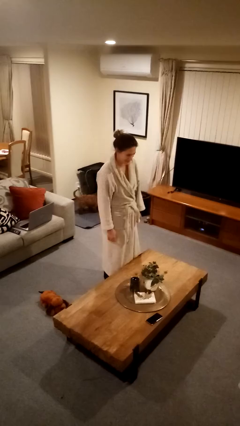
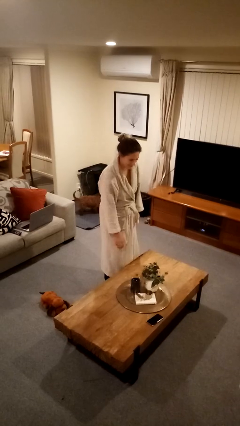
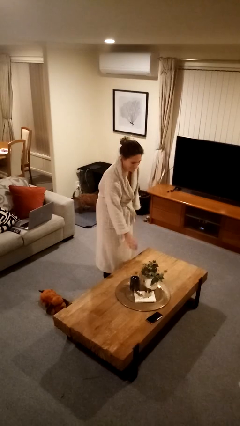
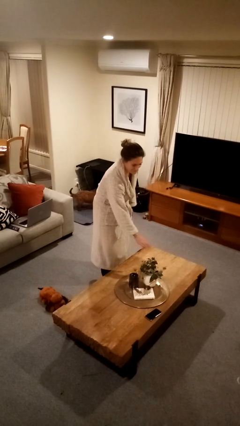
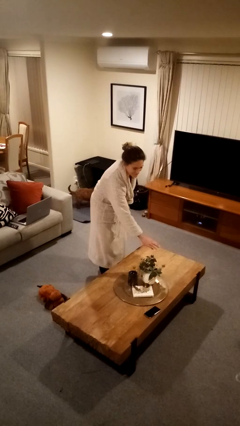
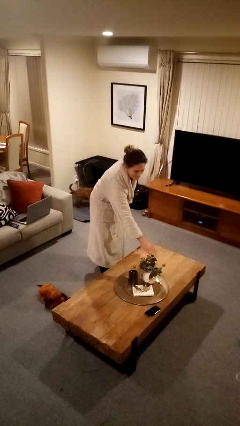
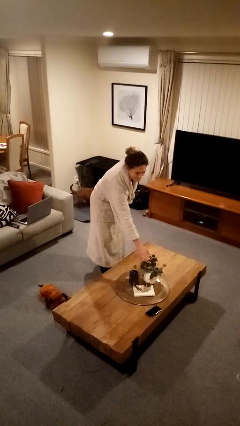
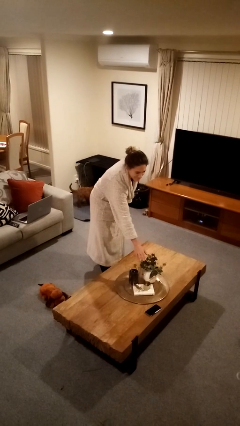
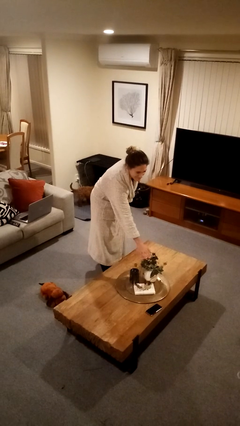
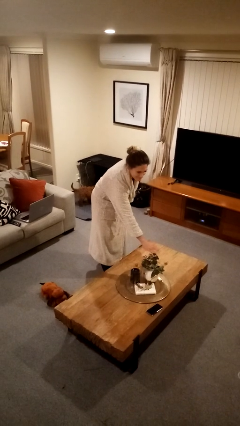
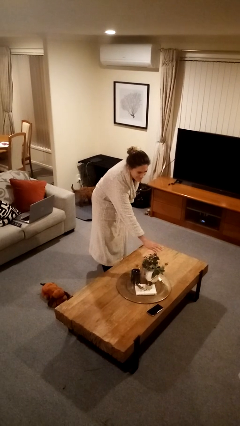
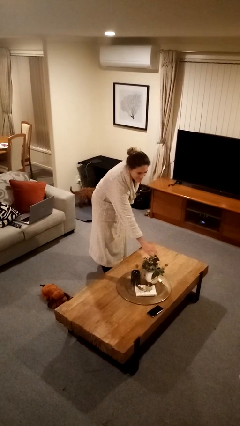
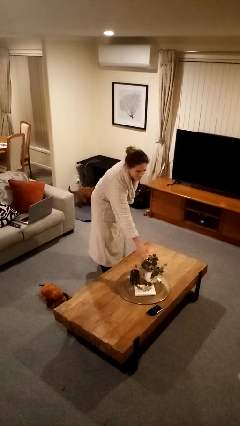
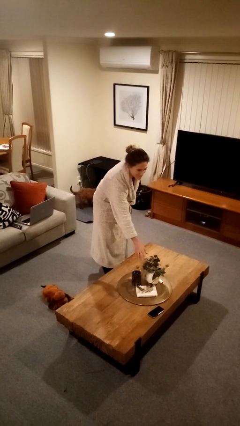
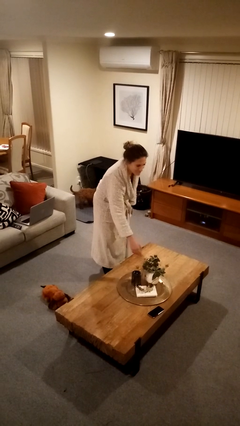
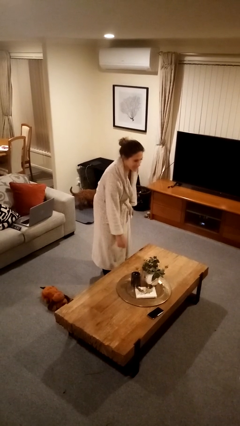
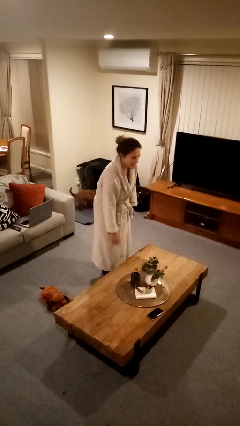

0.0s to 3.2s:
person waves hand over object

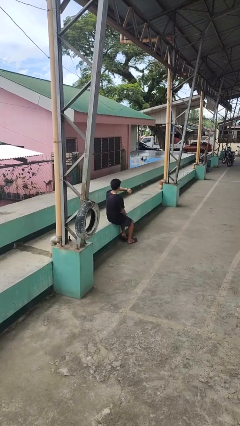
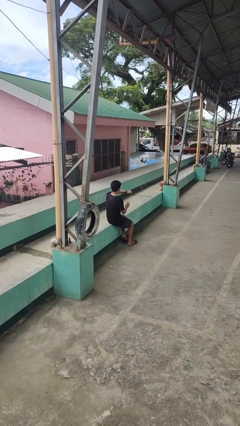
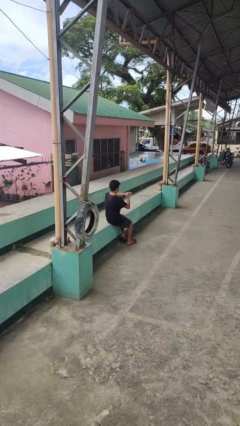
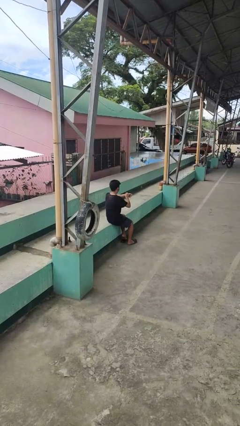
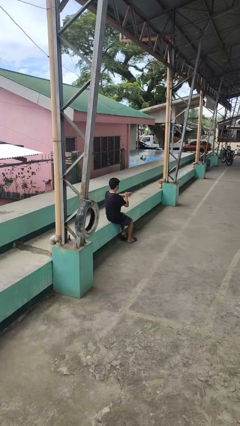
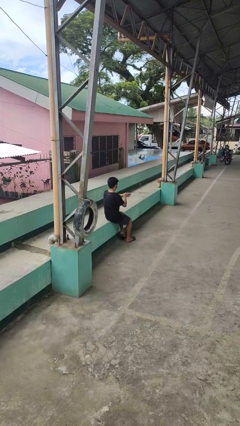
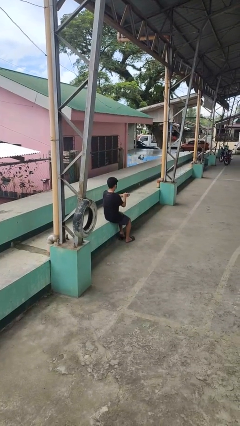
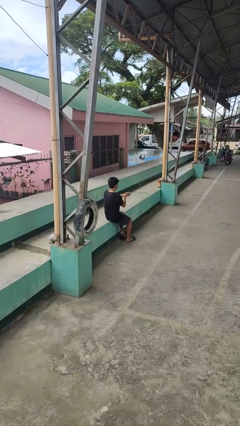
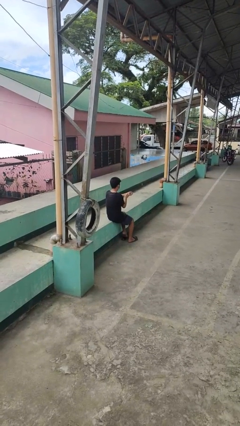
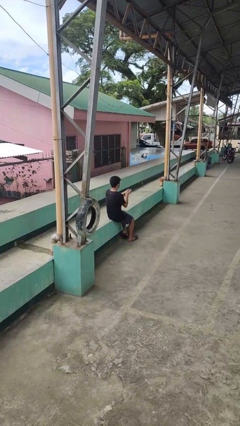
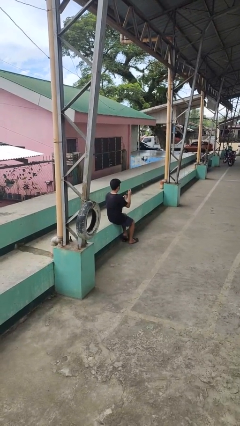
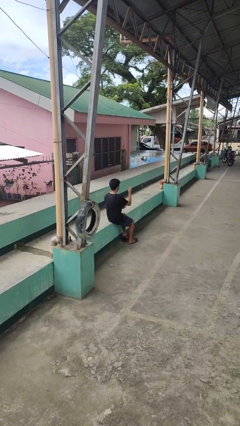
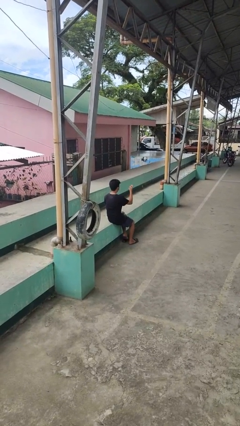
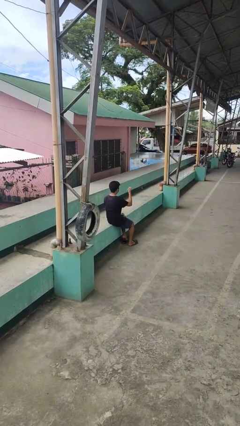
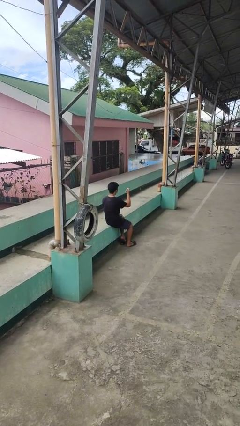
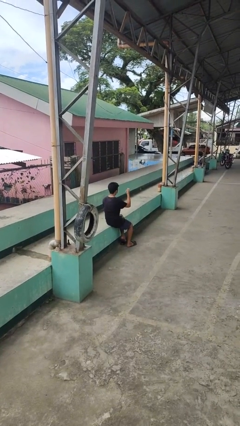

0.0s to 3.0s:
person takes off wristwatch

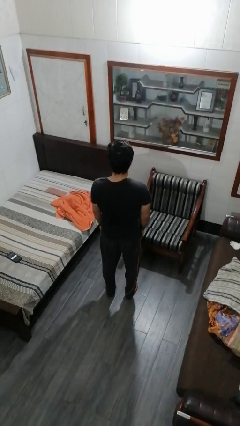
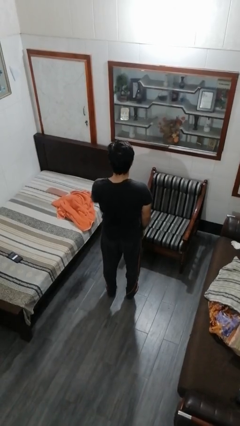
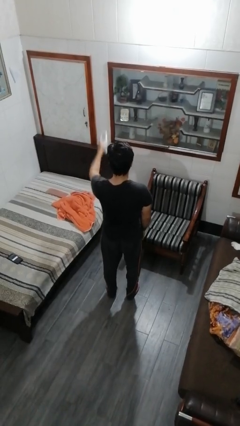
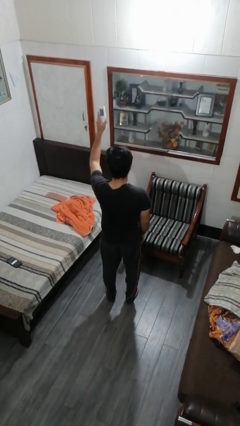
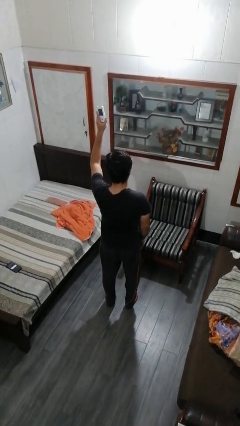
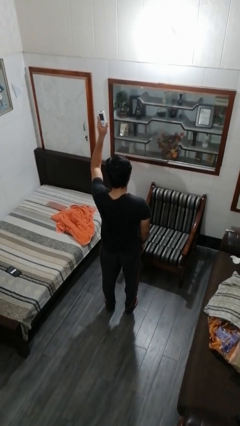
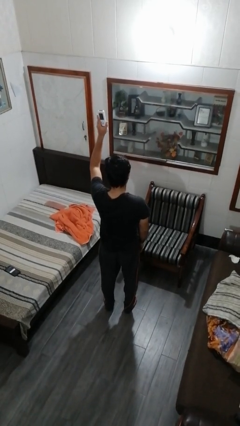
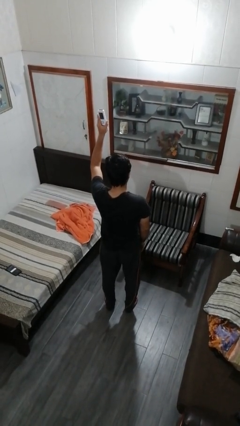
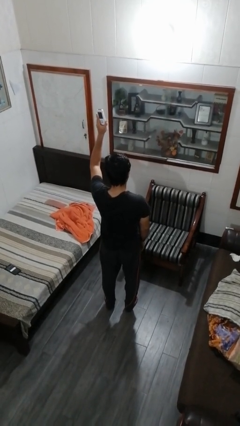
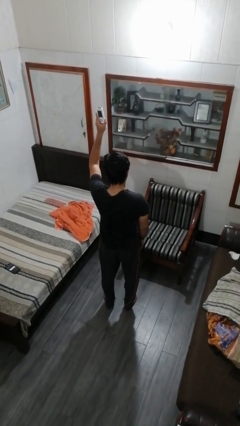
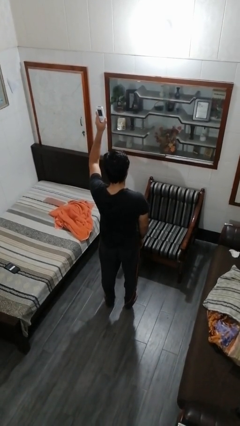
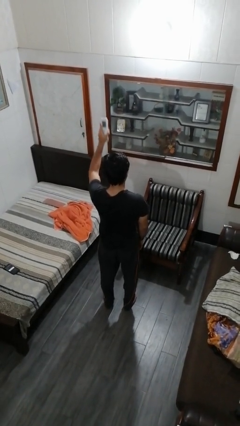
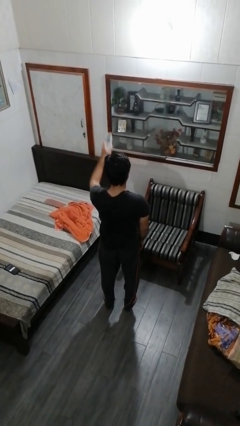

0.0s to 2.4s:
person holds object above head

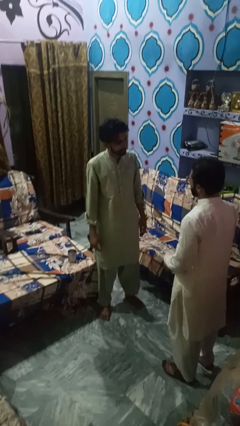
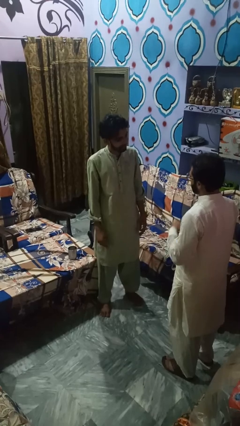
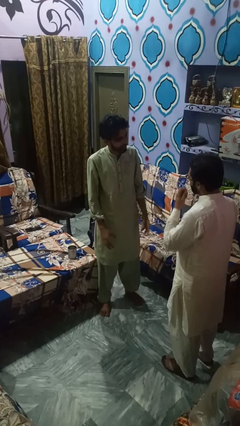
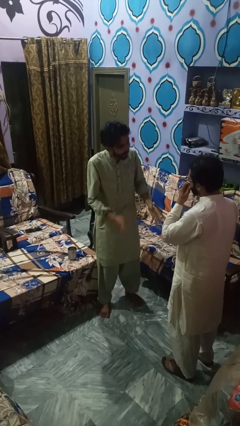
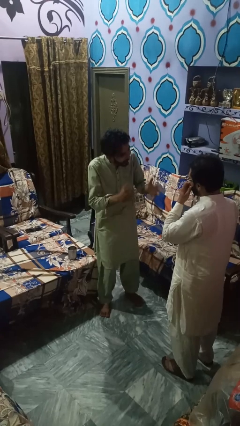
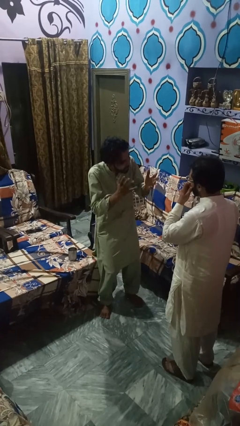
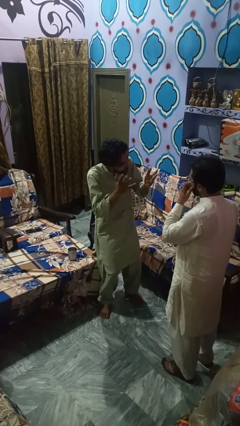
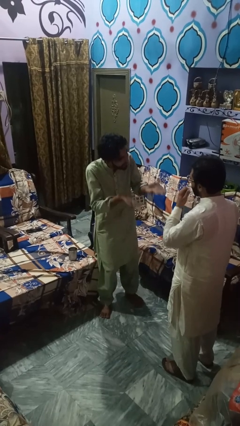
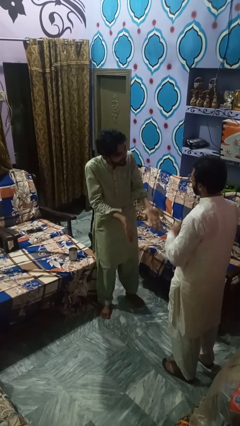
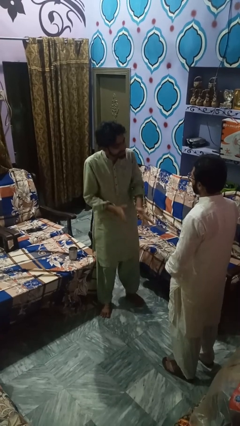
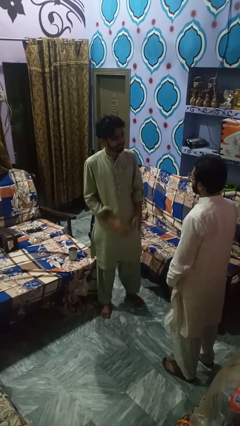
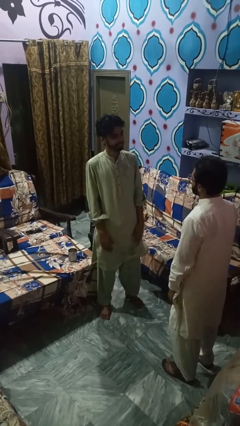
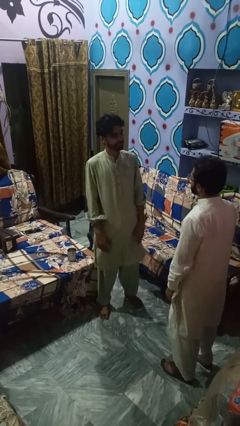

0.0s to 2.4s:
person laughs with person

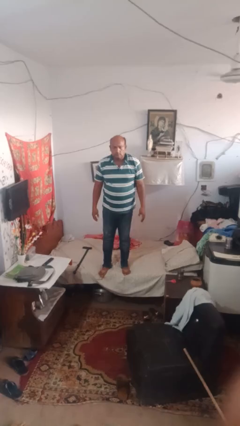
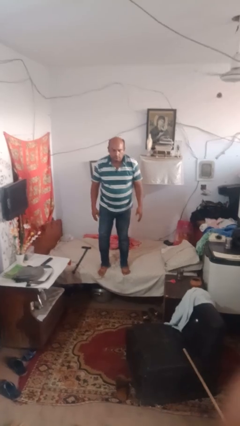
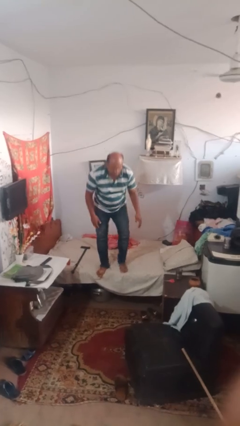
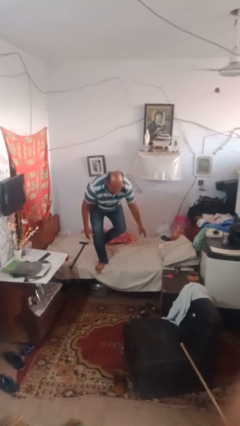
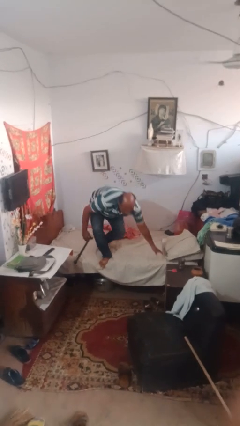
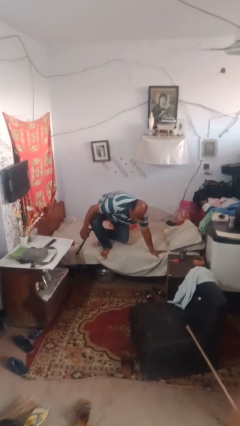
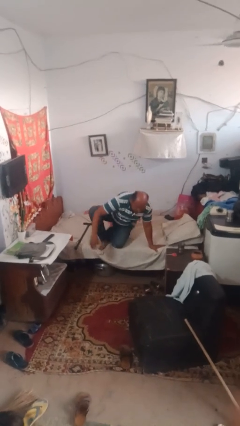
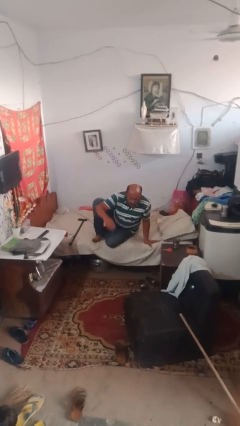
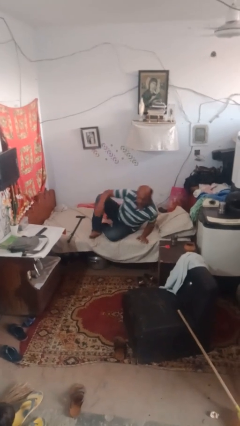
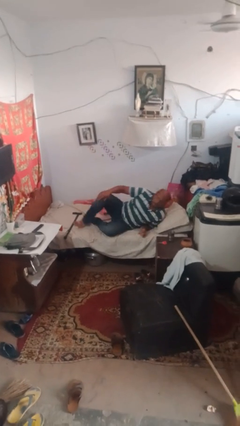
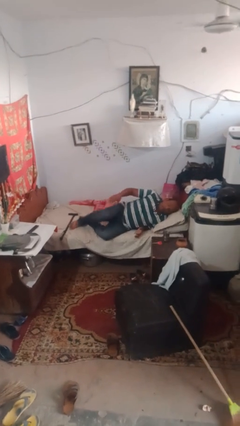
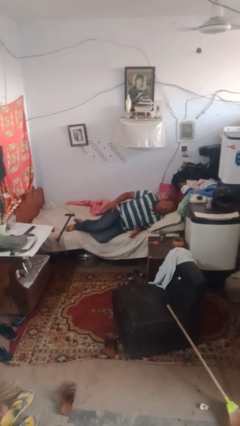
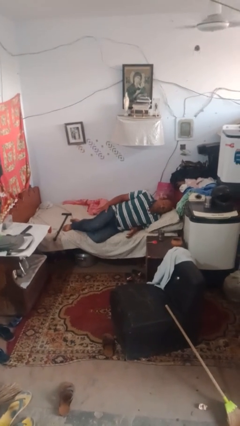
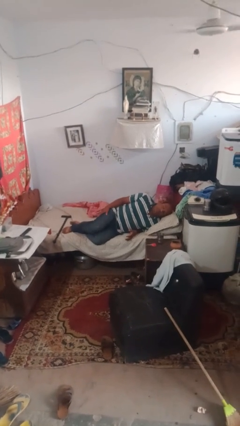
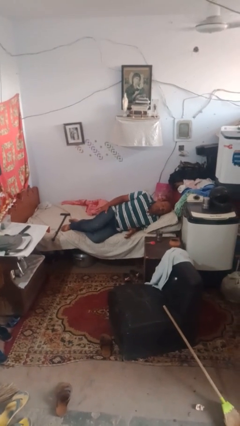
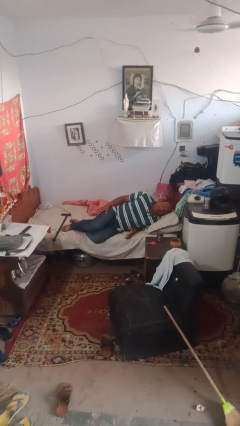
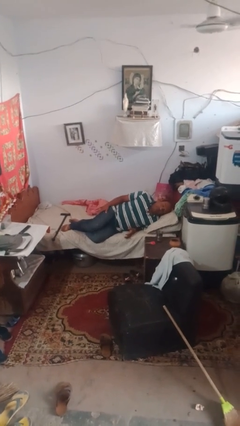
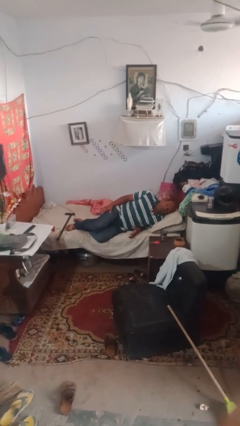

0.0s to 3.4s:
person lies down on bed

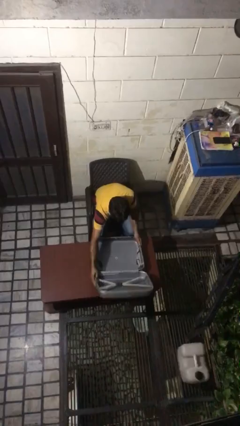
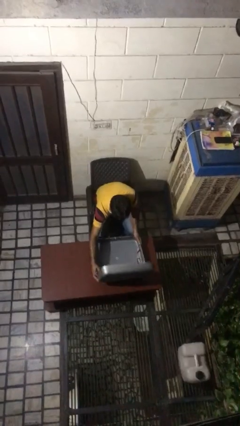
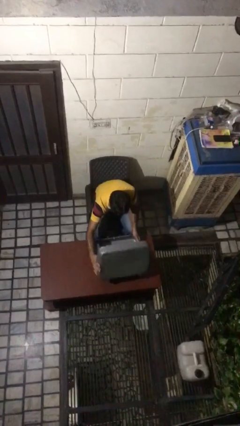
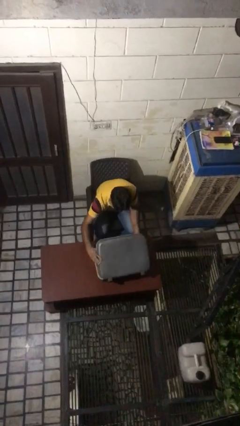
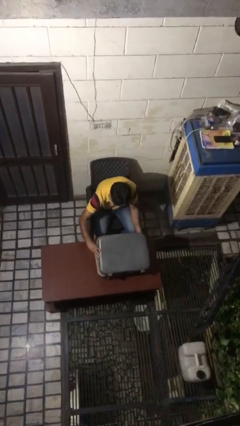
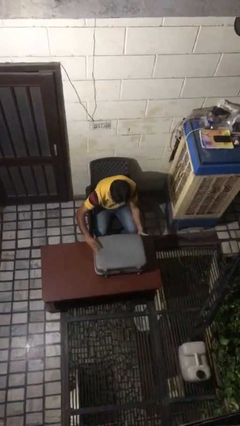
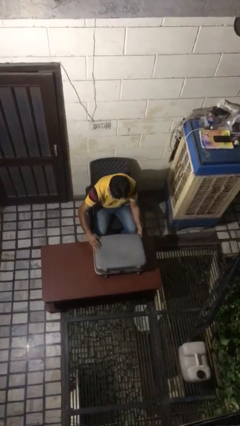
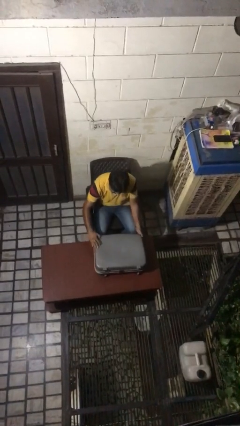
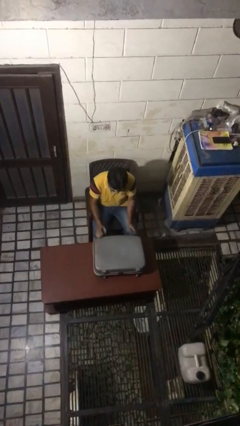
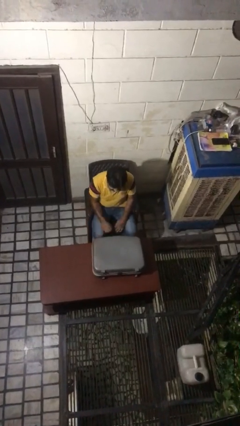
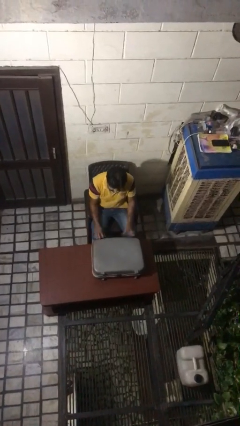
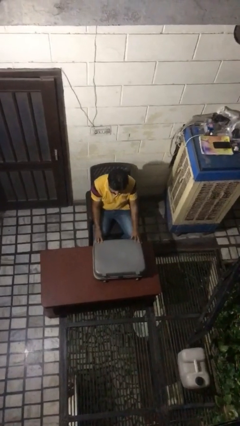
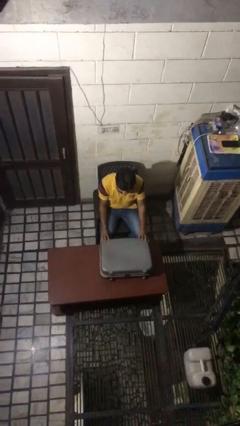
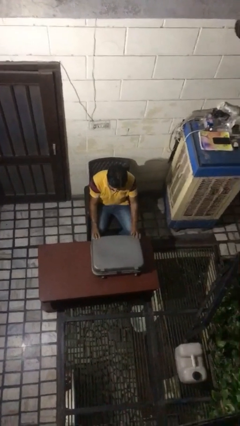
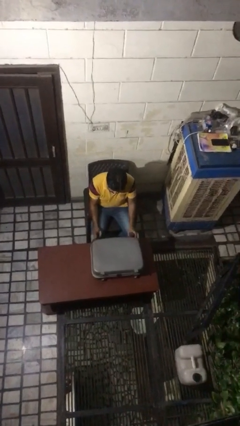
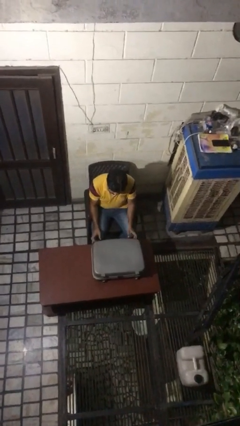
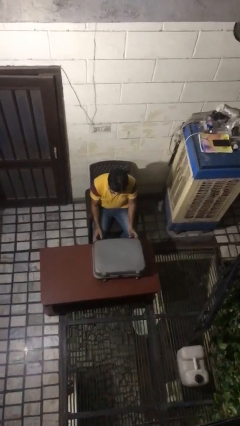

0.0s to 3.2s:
person closes suitcase
